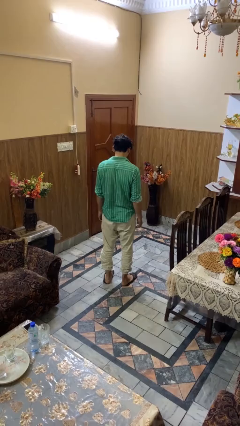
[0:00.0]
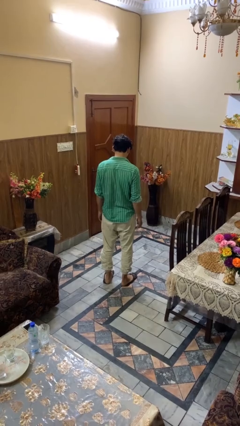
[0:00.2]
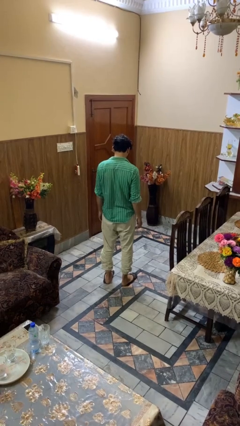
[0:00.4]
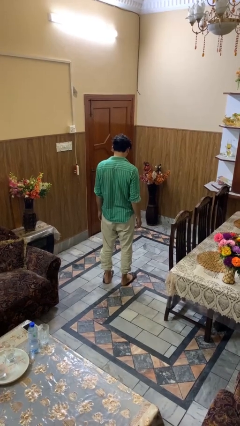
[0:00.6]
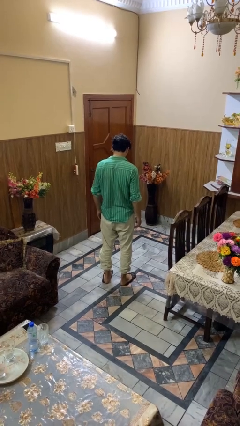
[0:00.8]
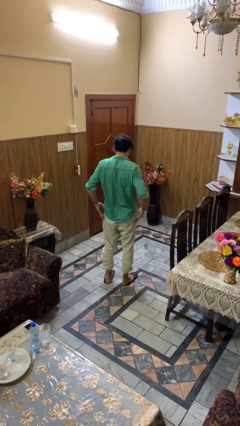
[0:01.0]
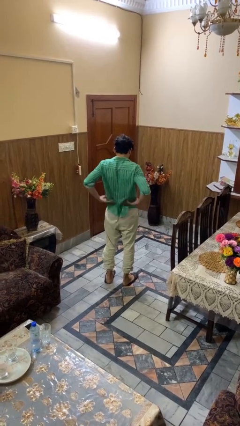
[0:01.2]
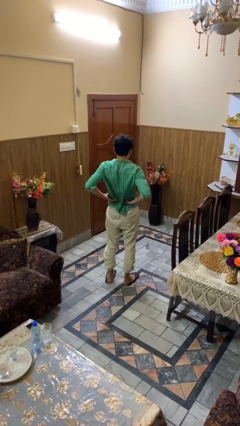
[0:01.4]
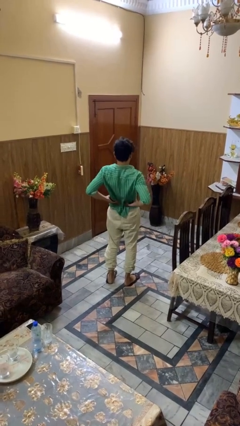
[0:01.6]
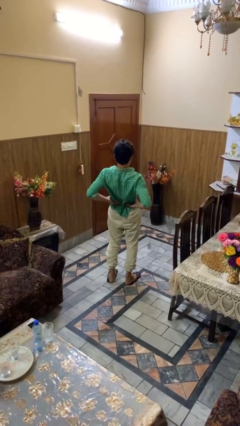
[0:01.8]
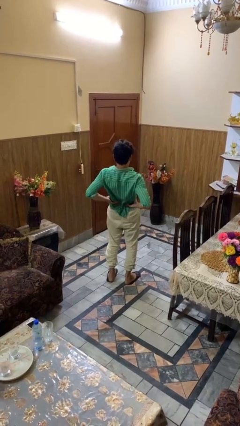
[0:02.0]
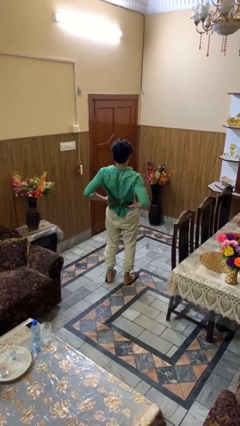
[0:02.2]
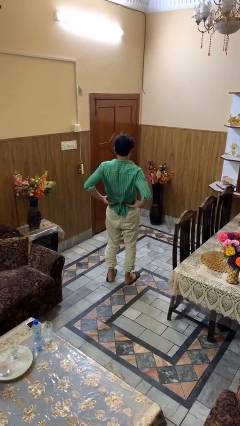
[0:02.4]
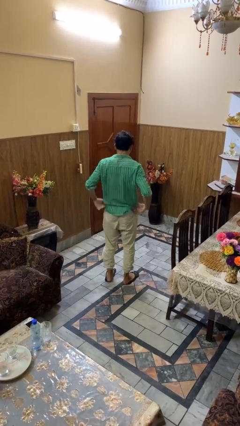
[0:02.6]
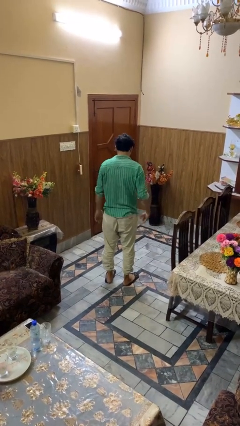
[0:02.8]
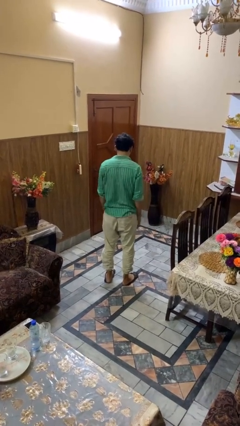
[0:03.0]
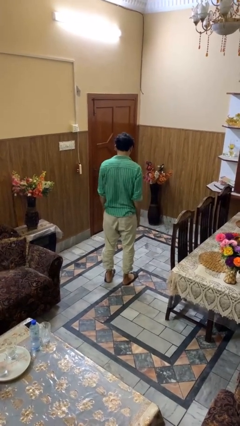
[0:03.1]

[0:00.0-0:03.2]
person stretches back

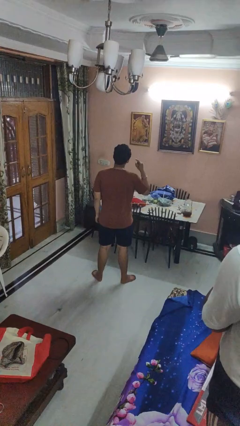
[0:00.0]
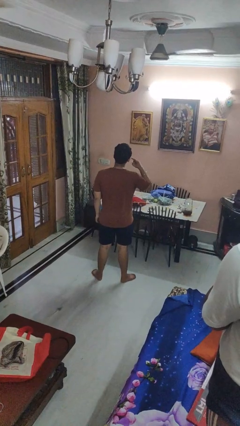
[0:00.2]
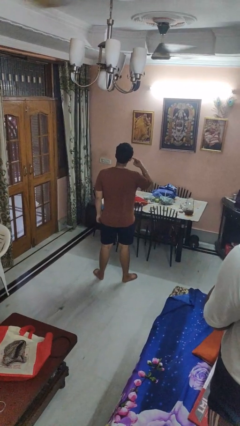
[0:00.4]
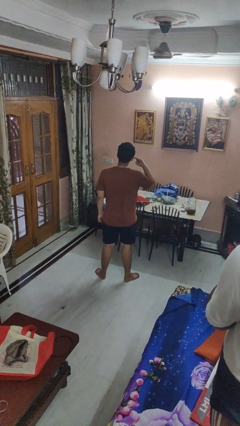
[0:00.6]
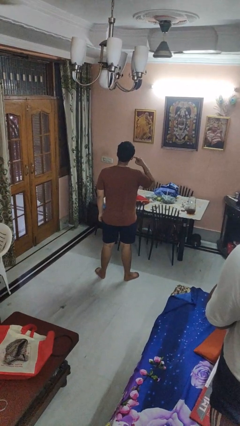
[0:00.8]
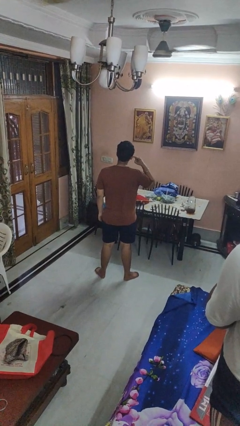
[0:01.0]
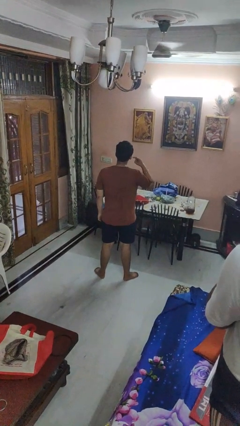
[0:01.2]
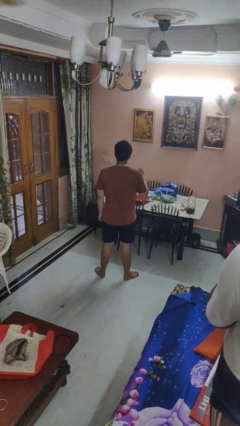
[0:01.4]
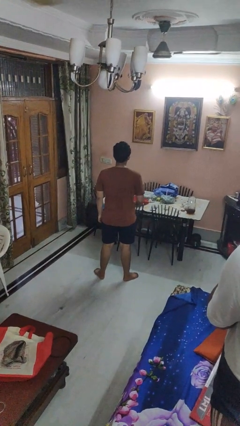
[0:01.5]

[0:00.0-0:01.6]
person gestures listen closely

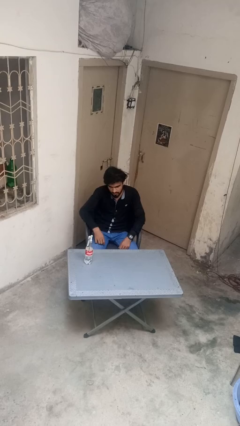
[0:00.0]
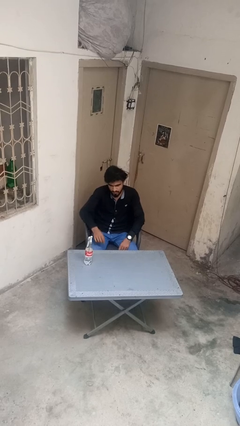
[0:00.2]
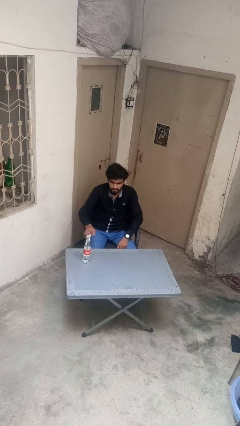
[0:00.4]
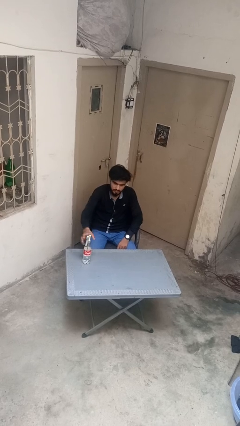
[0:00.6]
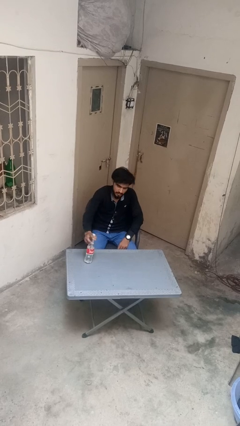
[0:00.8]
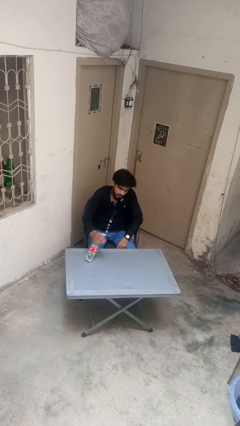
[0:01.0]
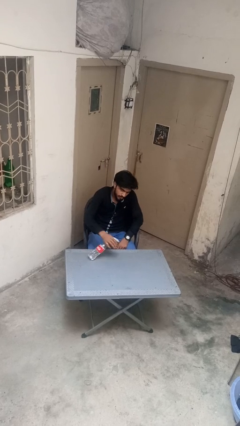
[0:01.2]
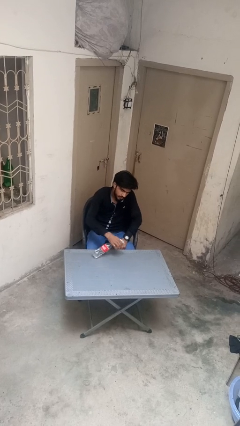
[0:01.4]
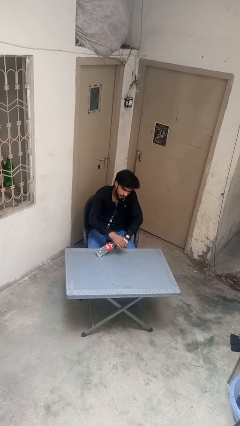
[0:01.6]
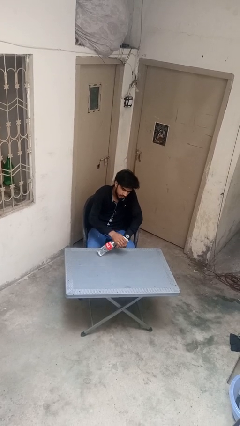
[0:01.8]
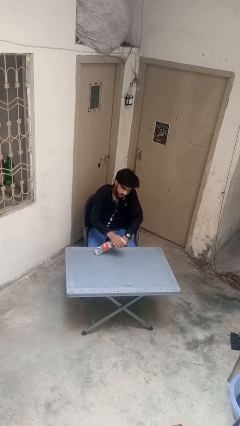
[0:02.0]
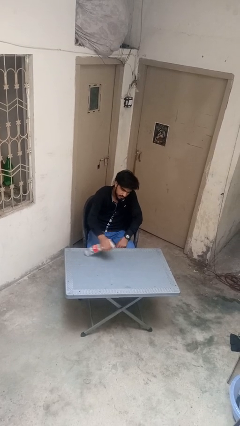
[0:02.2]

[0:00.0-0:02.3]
person sprays from bottle

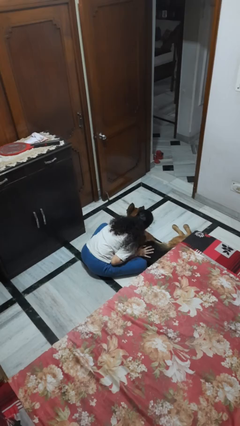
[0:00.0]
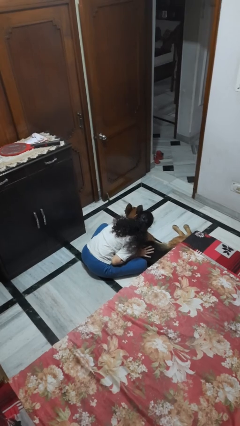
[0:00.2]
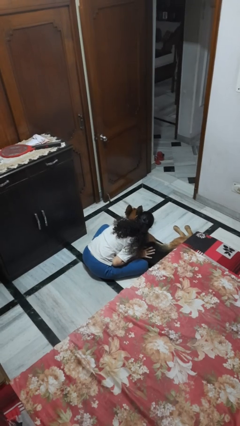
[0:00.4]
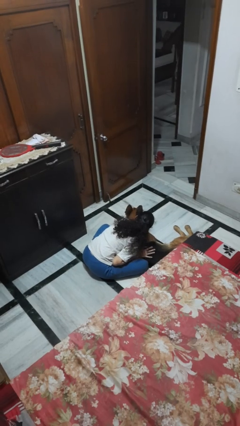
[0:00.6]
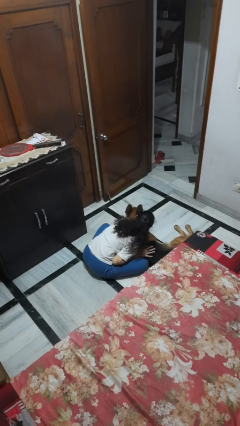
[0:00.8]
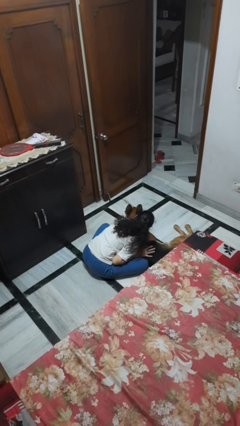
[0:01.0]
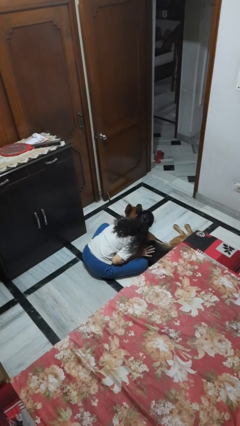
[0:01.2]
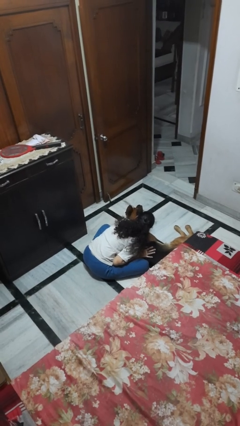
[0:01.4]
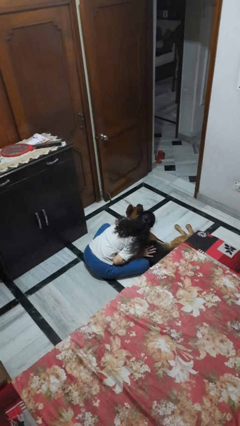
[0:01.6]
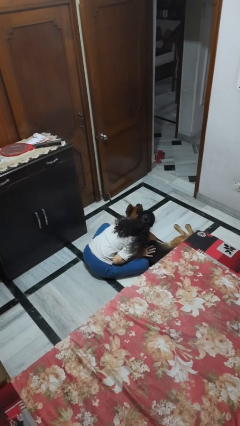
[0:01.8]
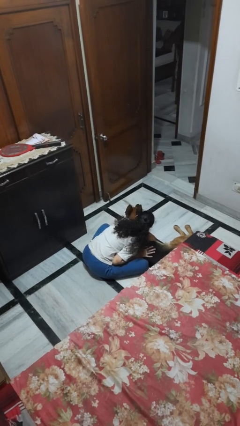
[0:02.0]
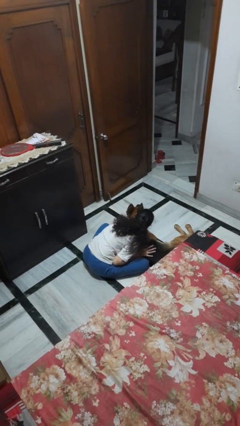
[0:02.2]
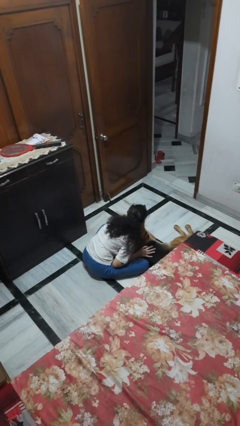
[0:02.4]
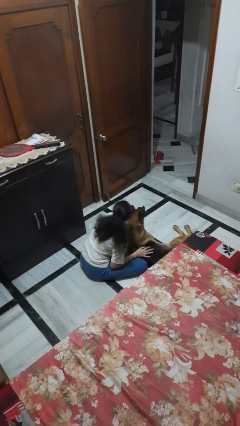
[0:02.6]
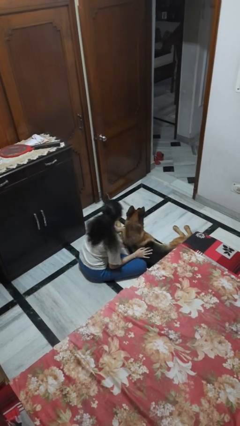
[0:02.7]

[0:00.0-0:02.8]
person hugs dog

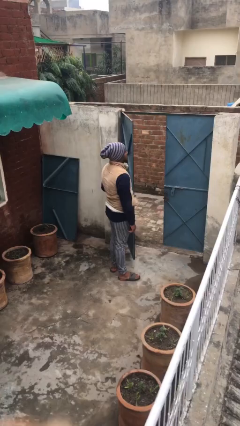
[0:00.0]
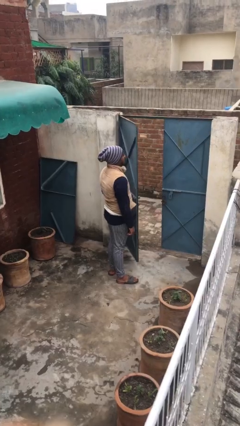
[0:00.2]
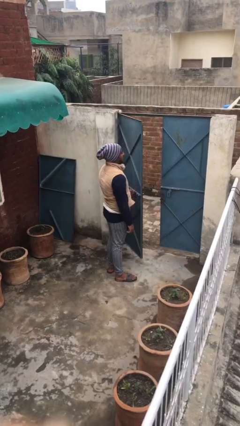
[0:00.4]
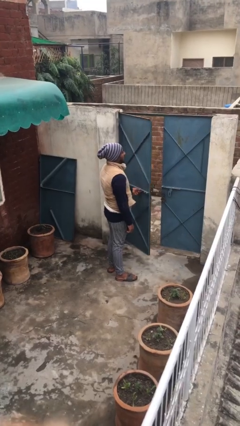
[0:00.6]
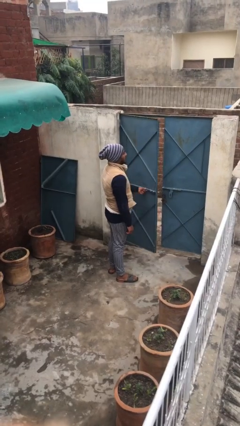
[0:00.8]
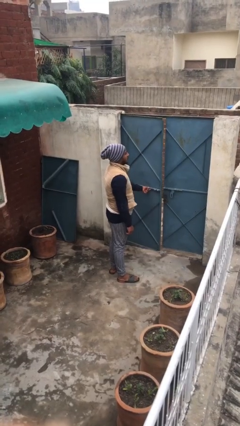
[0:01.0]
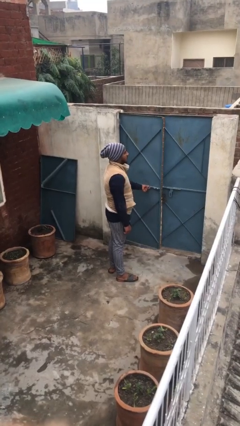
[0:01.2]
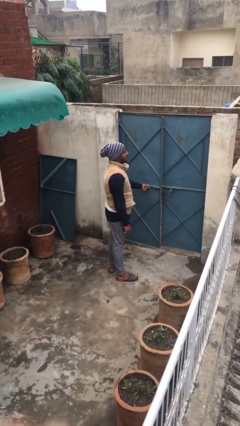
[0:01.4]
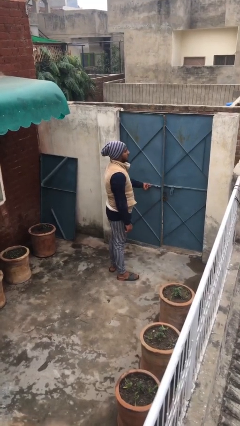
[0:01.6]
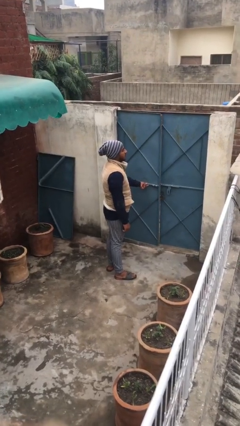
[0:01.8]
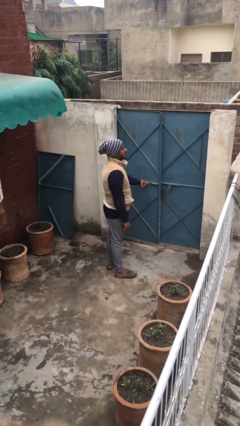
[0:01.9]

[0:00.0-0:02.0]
person closes facility door

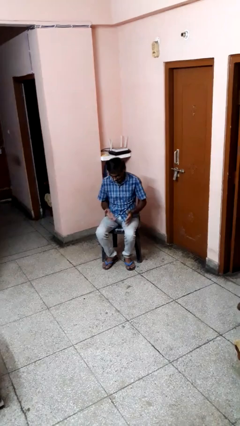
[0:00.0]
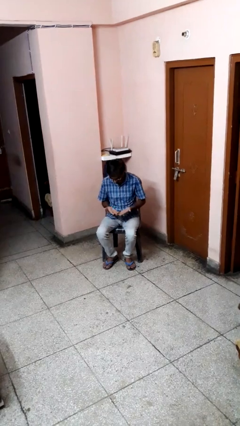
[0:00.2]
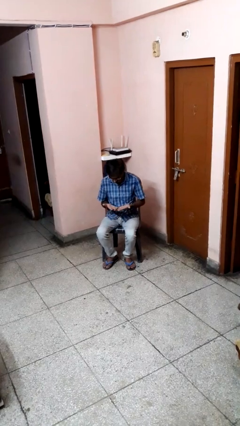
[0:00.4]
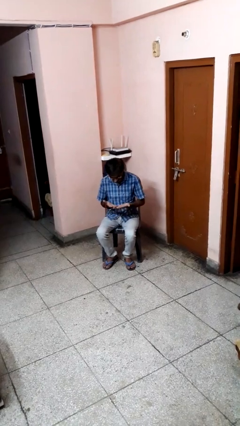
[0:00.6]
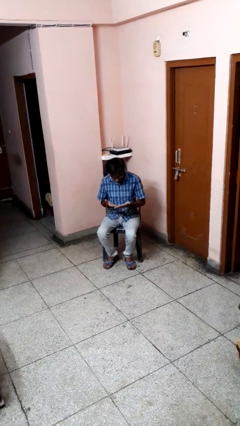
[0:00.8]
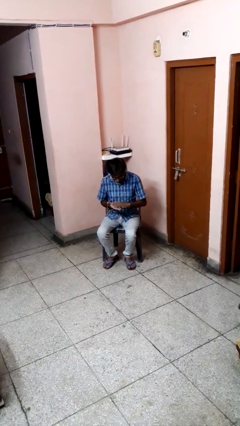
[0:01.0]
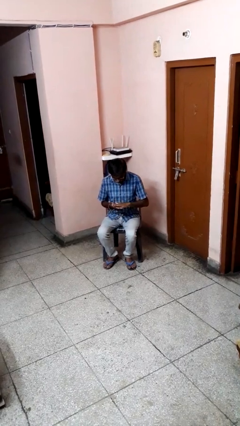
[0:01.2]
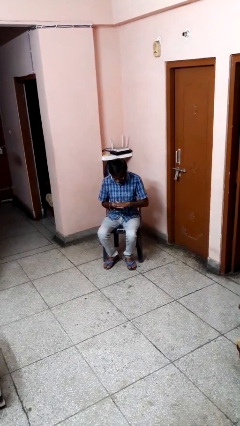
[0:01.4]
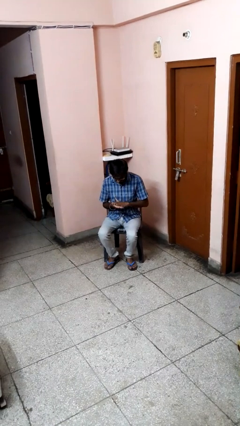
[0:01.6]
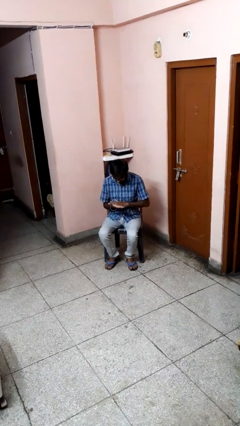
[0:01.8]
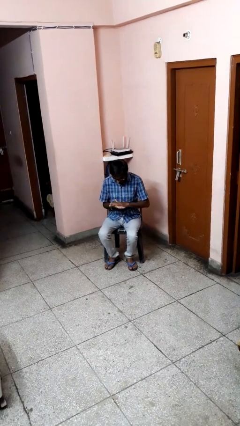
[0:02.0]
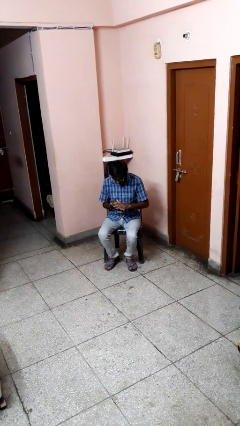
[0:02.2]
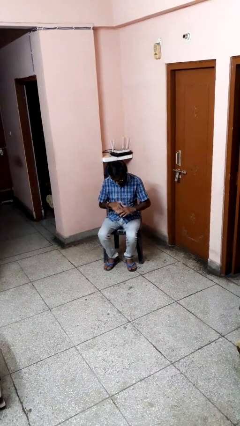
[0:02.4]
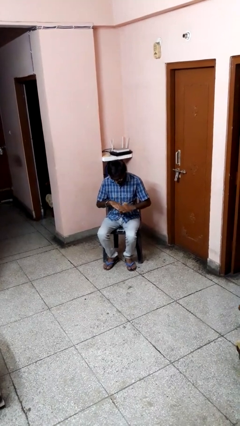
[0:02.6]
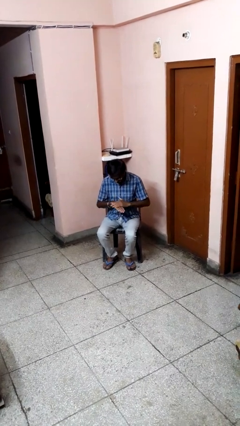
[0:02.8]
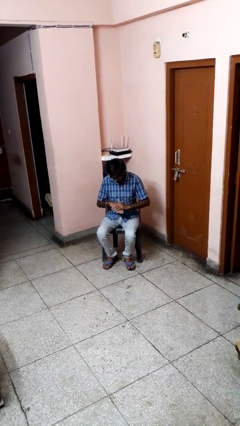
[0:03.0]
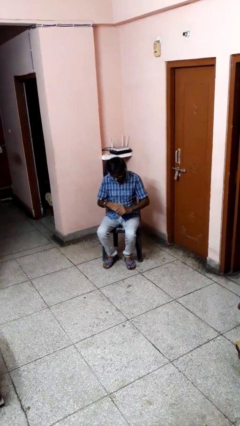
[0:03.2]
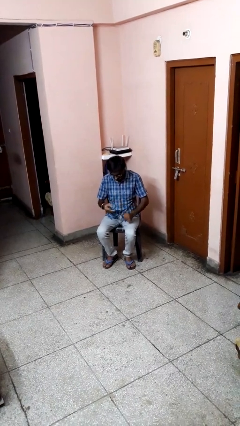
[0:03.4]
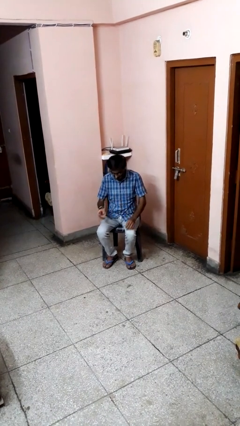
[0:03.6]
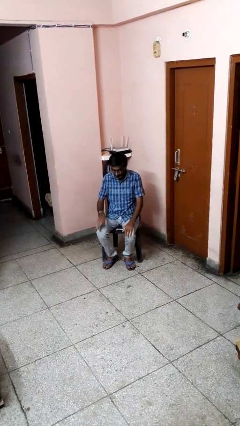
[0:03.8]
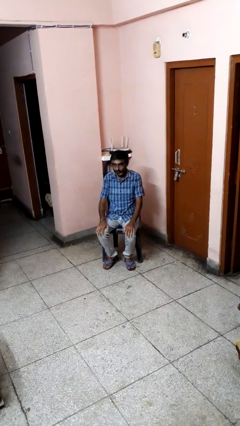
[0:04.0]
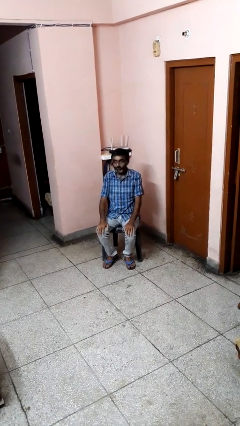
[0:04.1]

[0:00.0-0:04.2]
person looks at hands in lap

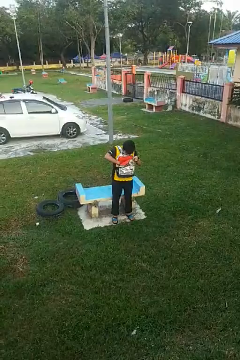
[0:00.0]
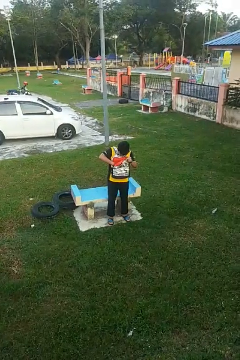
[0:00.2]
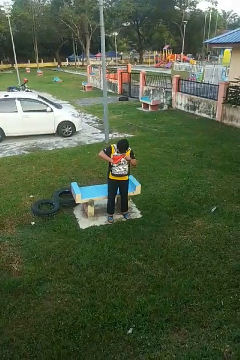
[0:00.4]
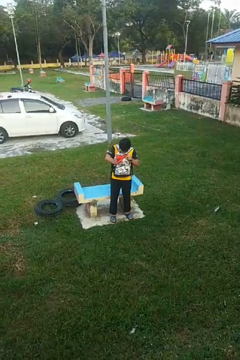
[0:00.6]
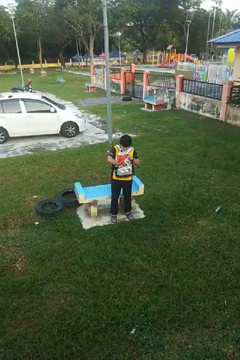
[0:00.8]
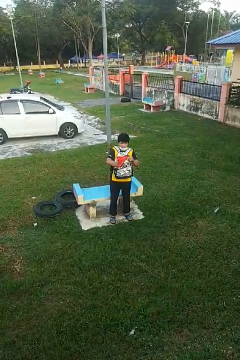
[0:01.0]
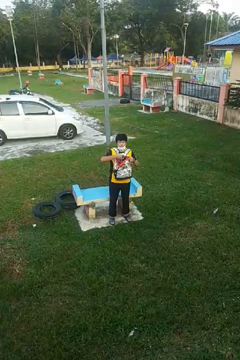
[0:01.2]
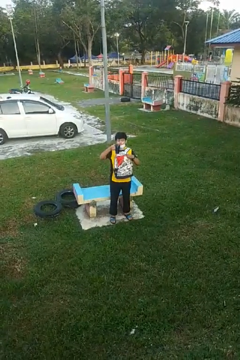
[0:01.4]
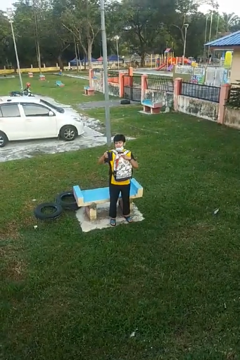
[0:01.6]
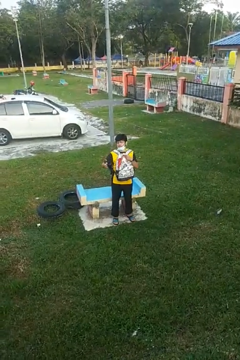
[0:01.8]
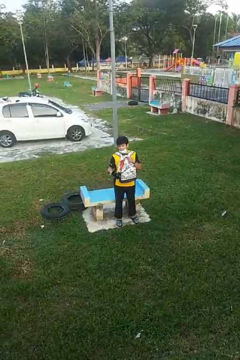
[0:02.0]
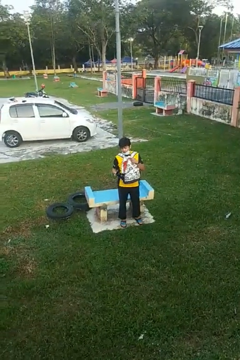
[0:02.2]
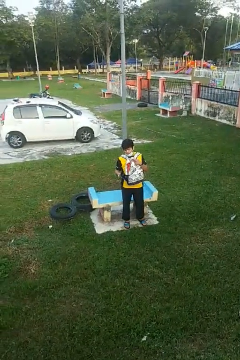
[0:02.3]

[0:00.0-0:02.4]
person takes off facemask
